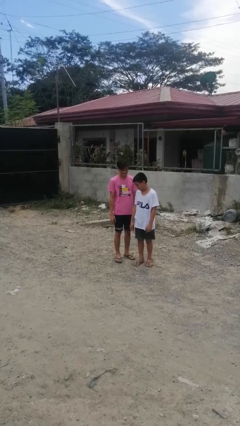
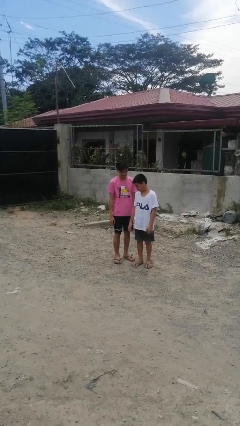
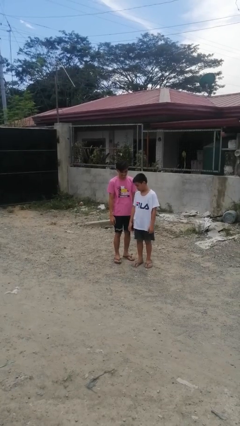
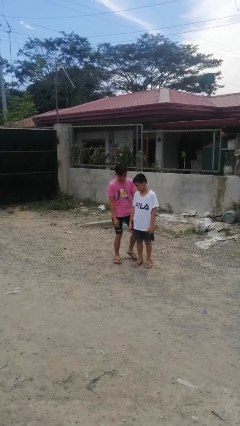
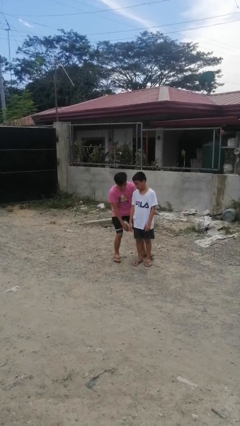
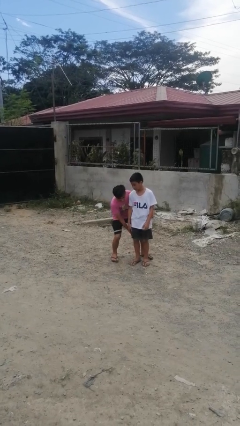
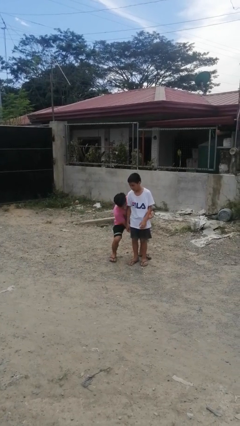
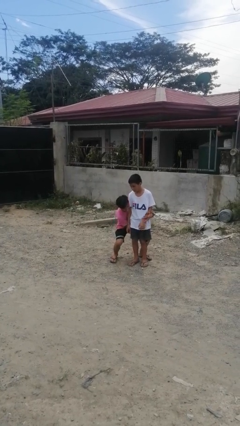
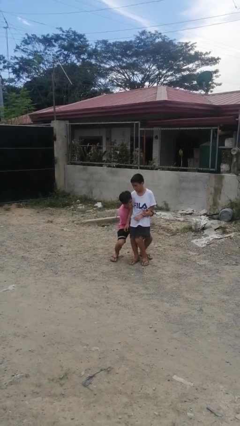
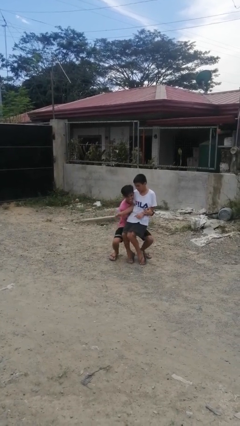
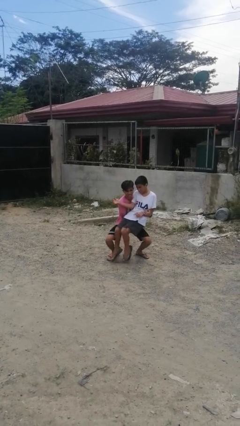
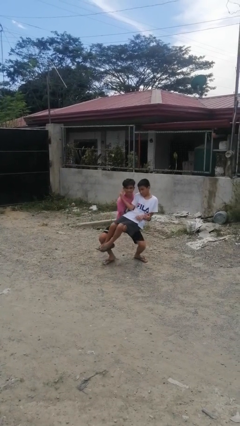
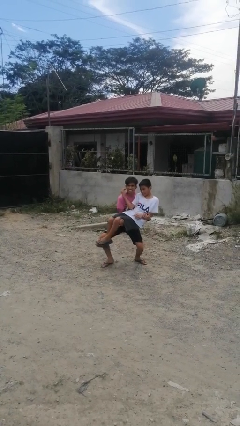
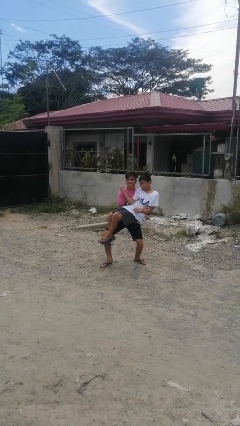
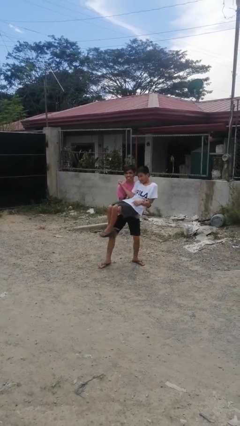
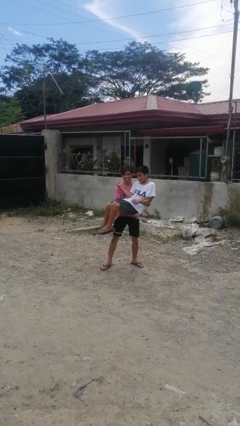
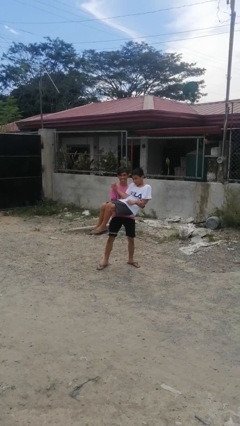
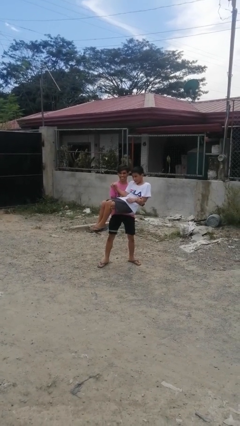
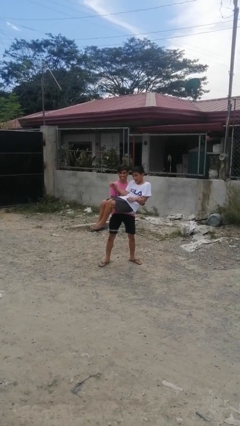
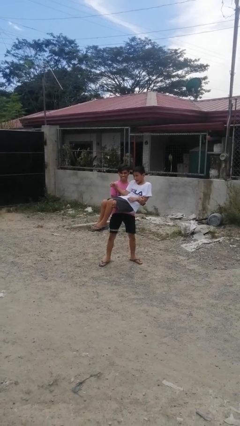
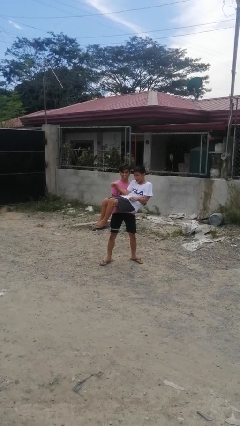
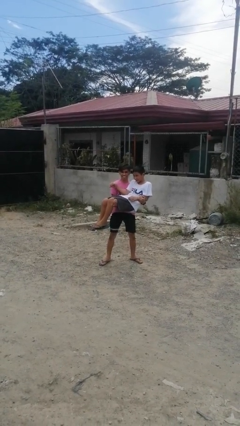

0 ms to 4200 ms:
person picks up person

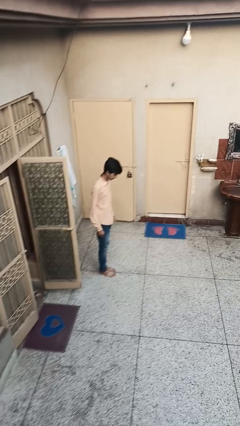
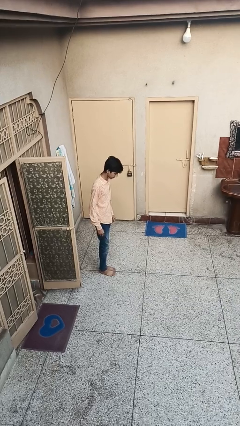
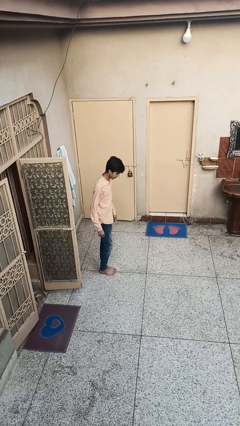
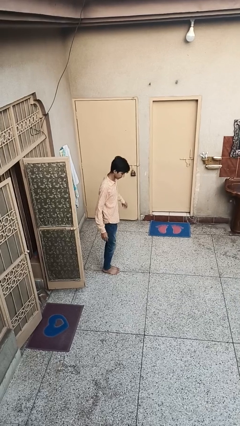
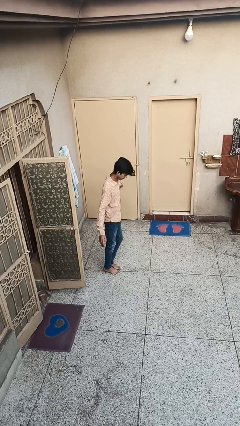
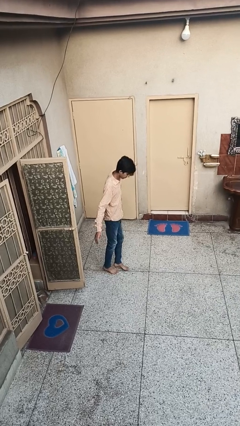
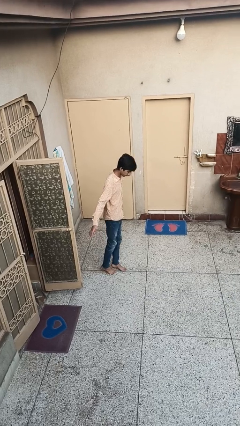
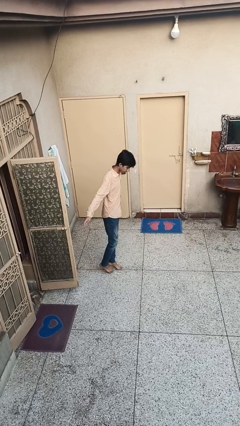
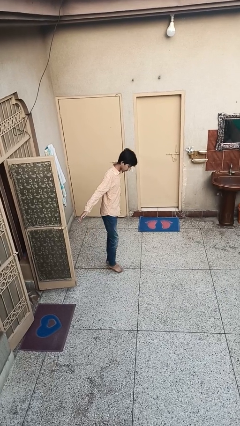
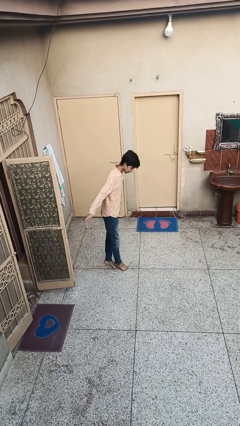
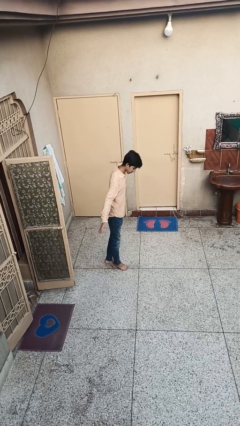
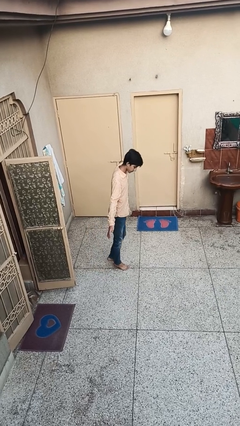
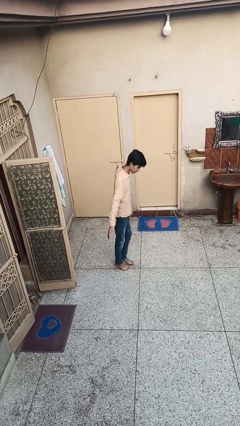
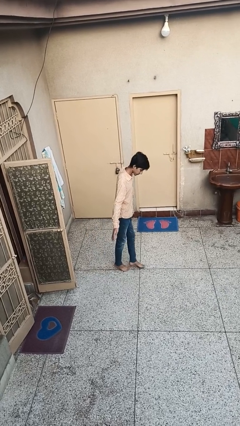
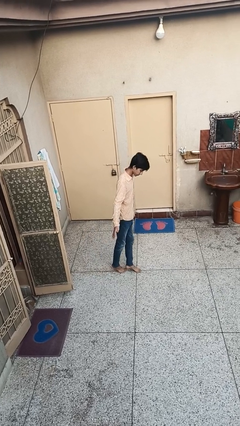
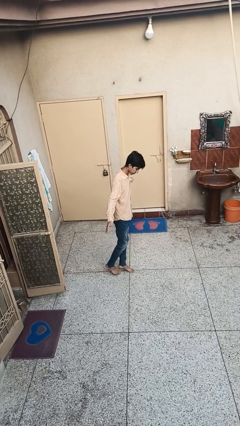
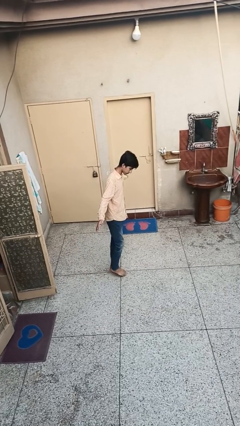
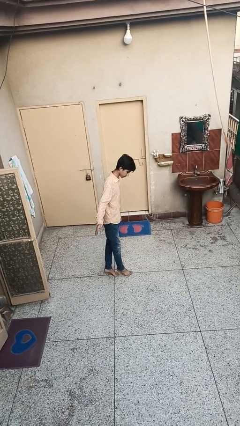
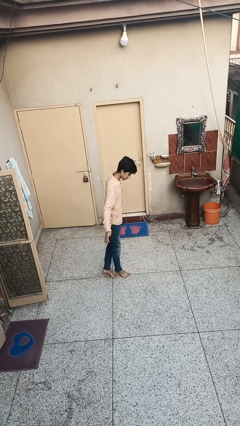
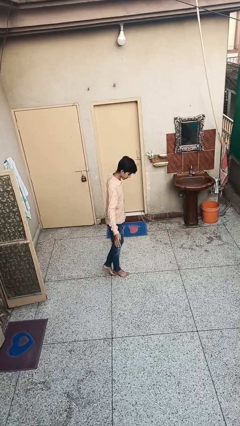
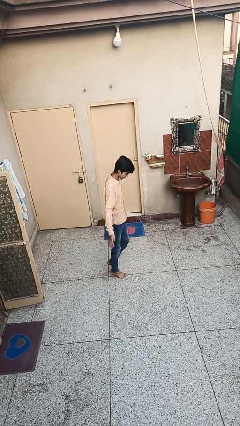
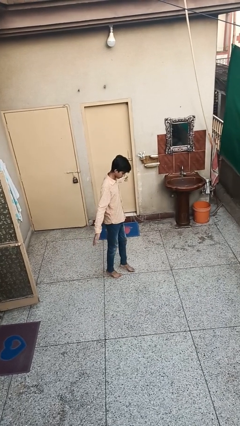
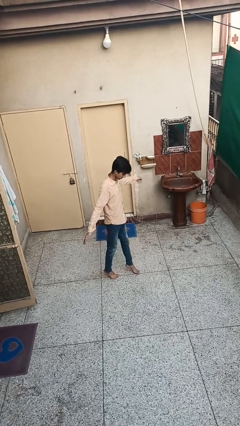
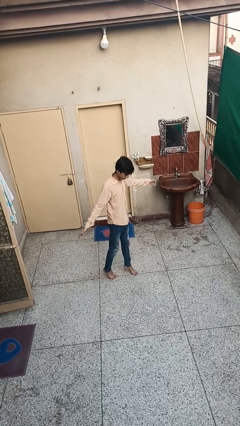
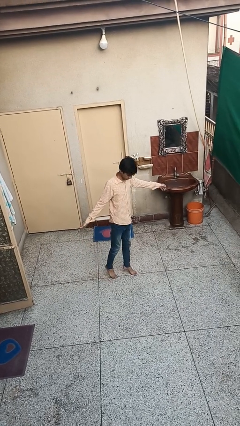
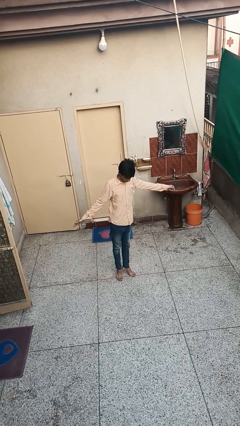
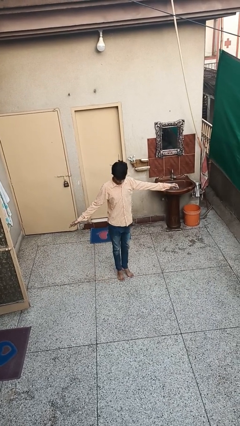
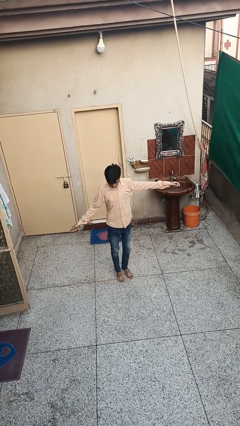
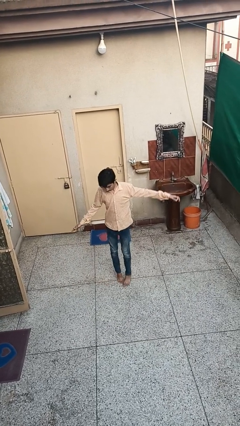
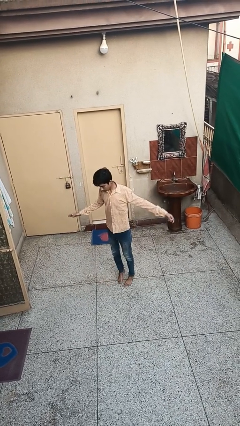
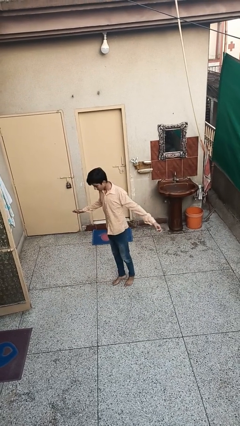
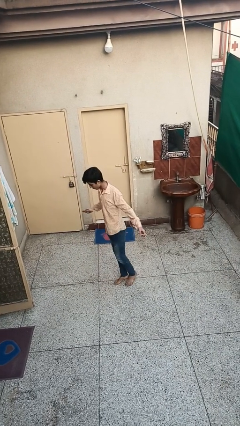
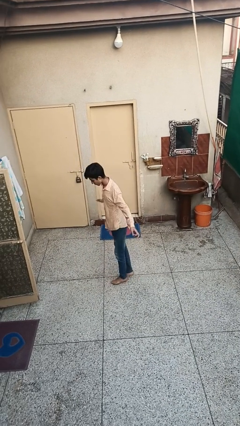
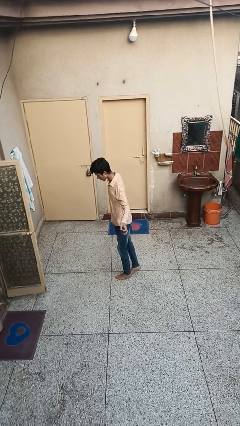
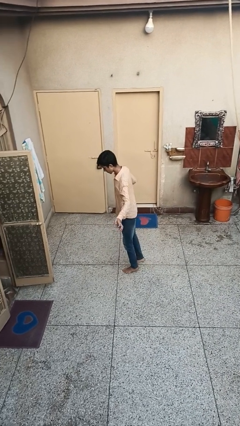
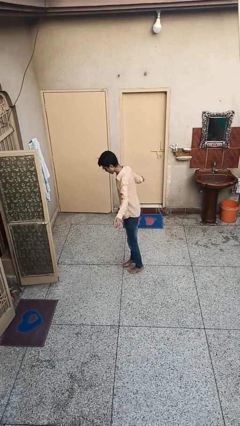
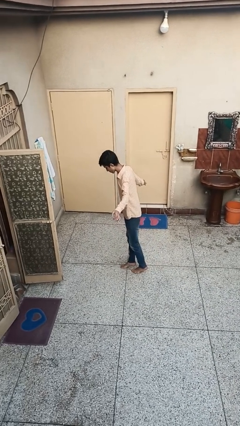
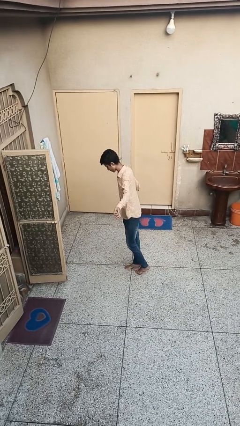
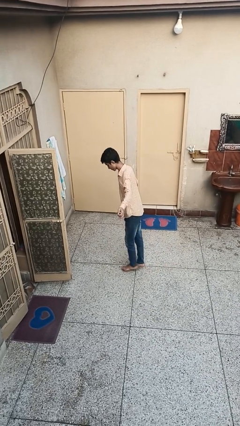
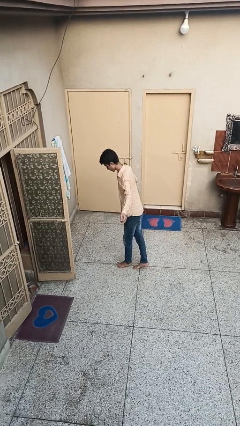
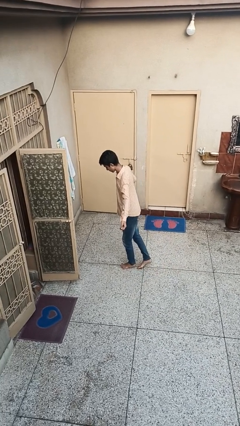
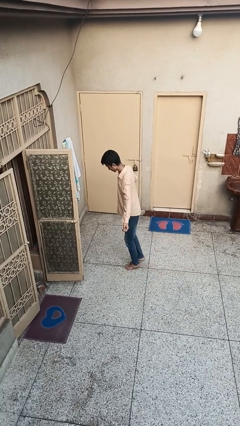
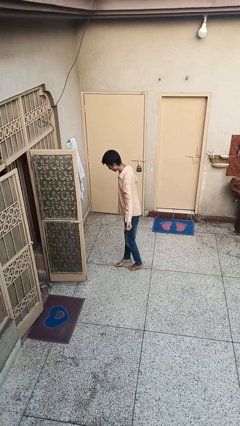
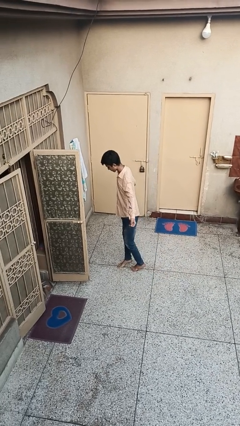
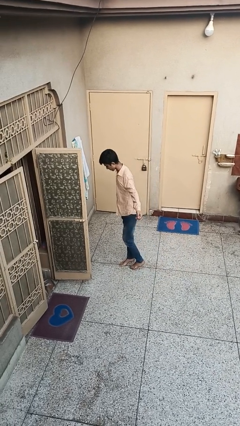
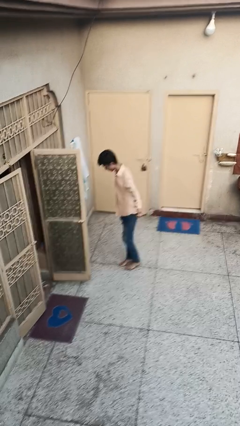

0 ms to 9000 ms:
person walks tiptoe

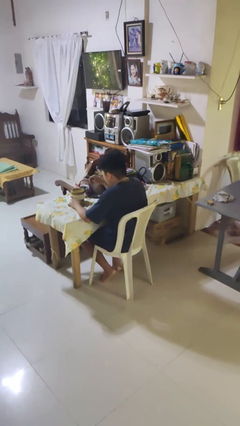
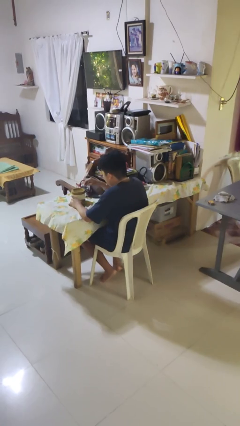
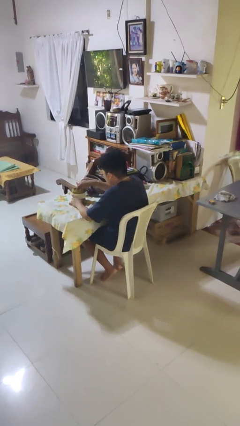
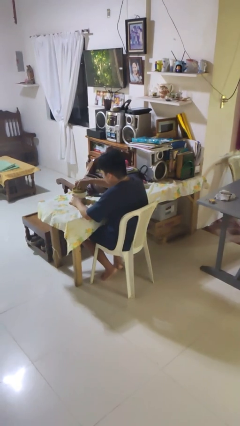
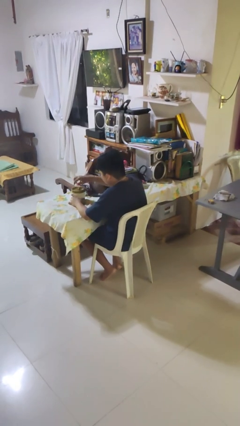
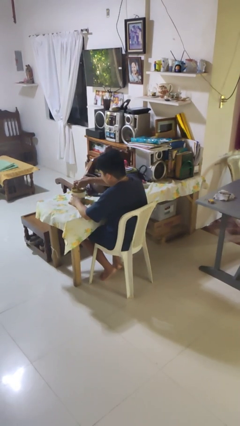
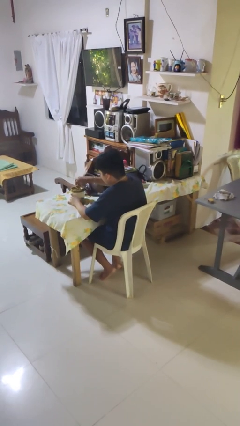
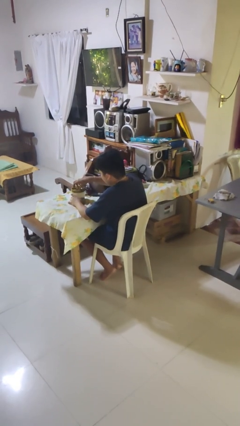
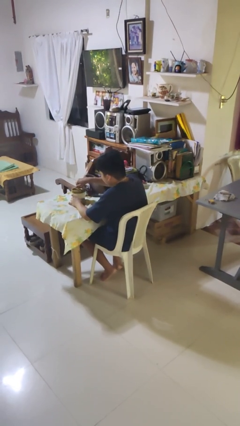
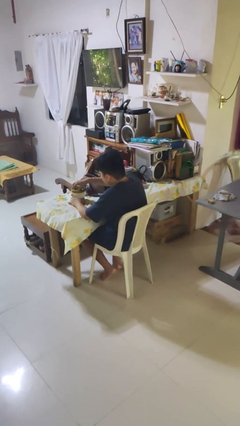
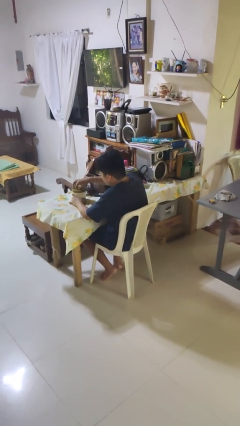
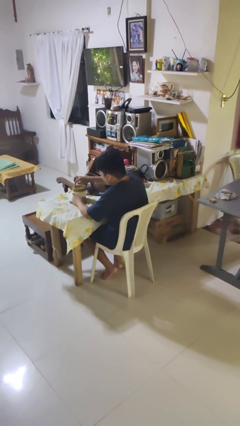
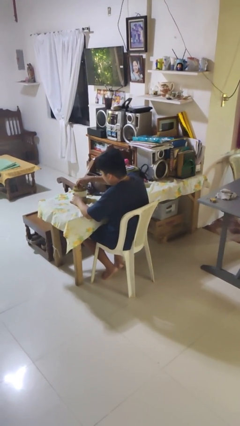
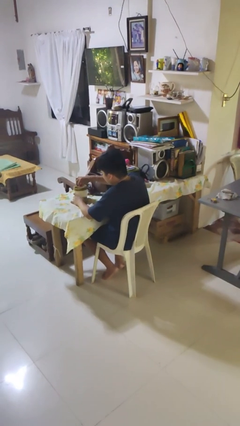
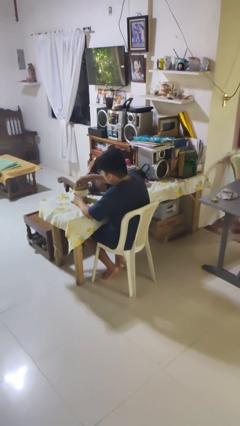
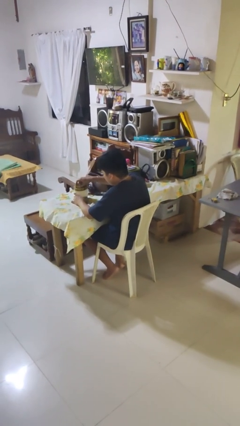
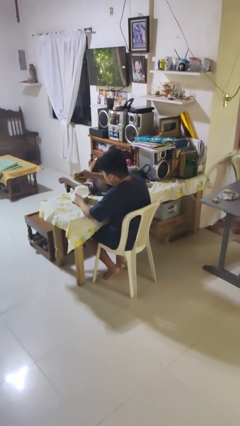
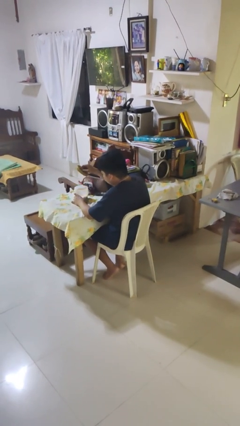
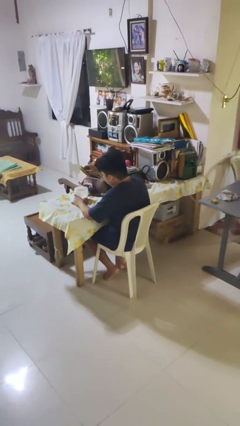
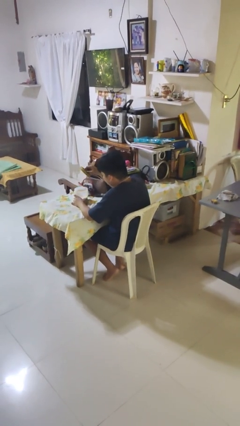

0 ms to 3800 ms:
person opens jar

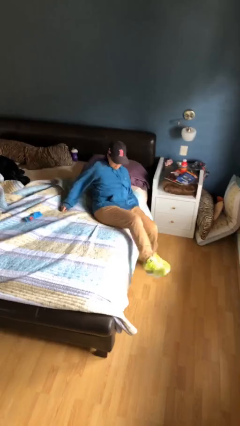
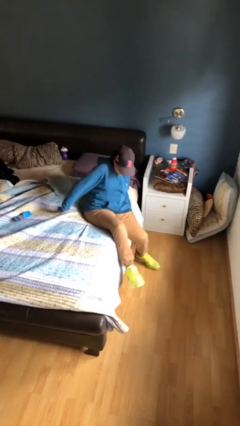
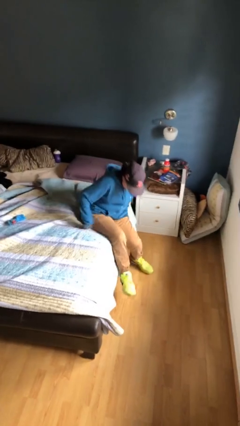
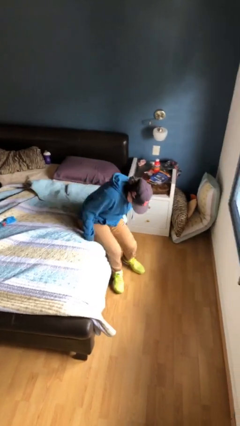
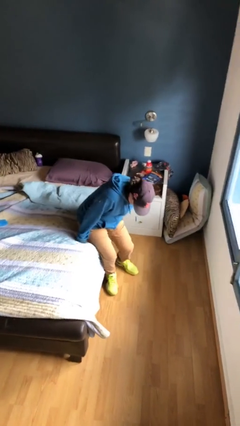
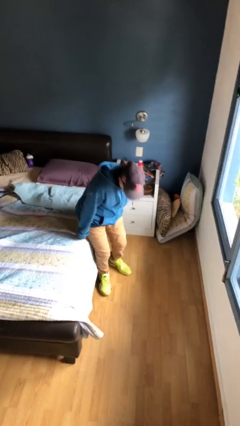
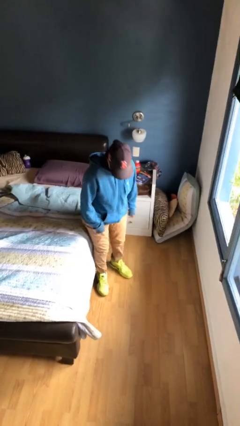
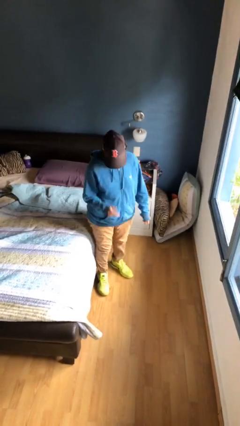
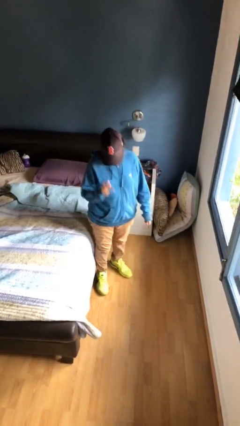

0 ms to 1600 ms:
person stands up
